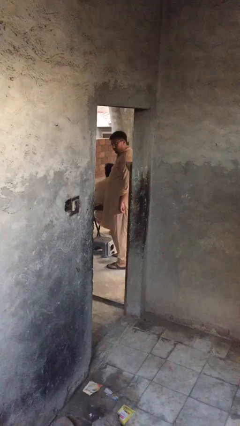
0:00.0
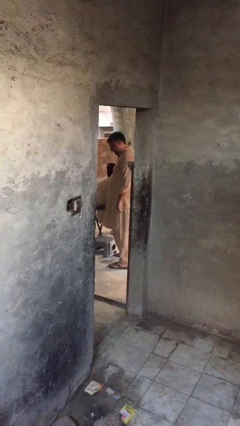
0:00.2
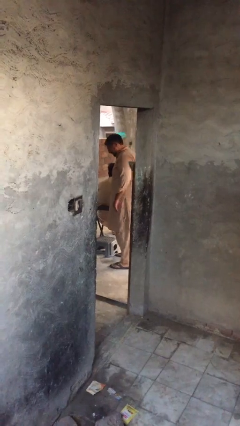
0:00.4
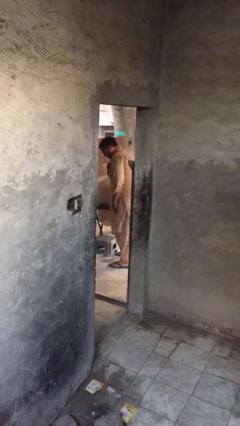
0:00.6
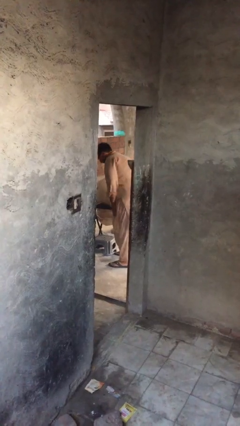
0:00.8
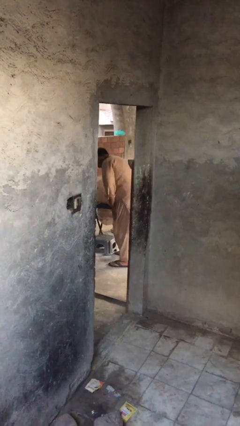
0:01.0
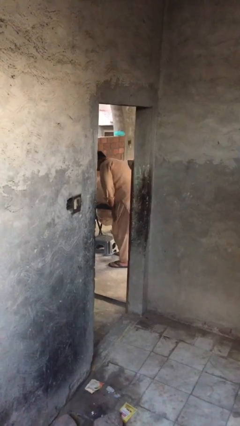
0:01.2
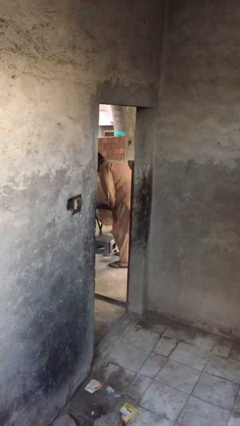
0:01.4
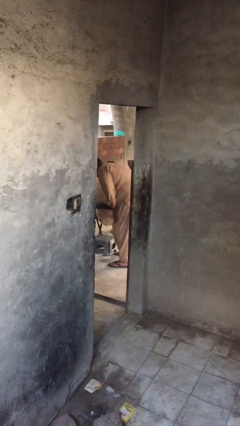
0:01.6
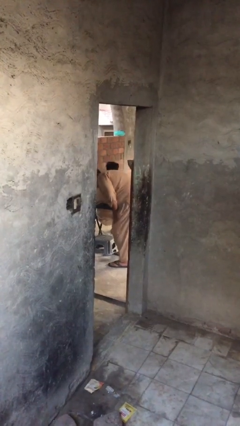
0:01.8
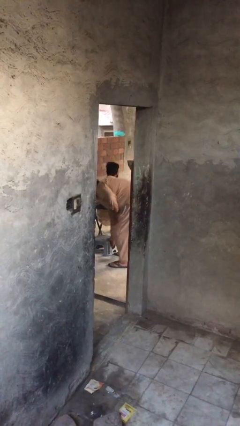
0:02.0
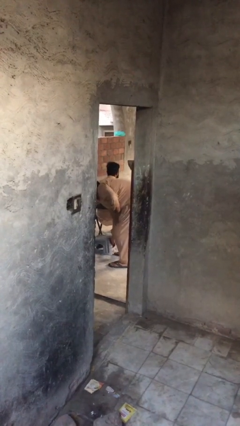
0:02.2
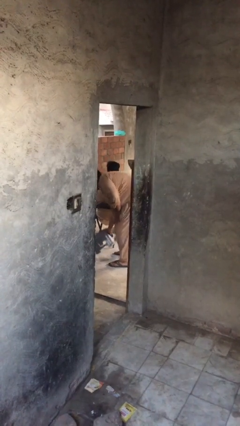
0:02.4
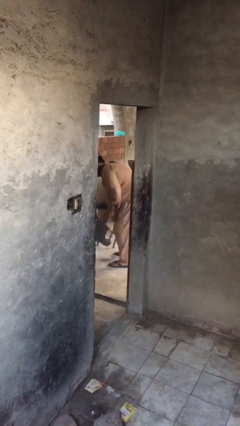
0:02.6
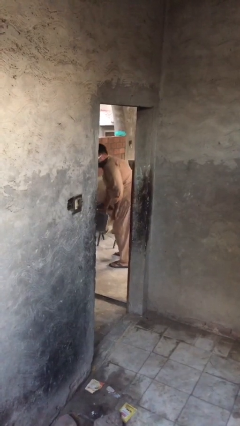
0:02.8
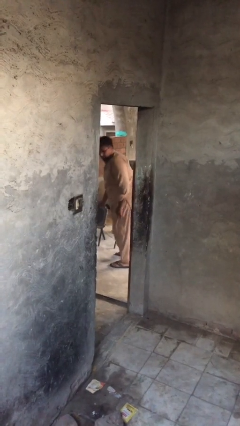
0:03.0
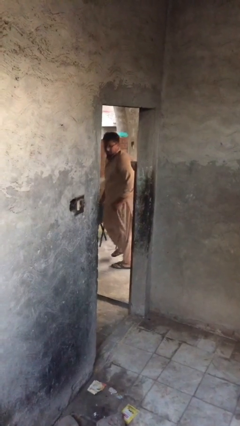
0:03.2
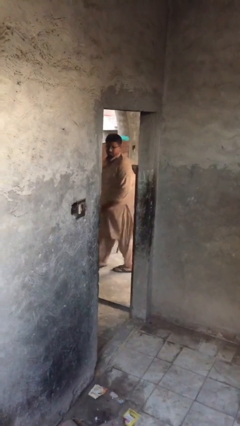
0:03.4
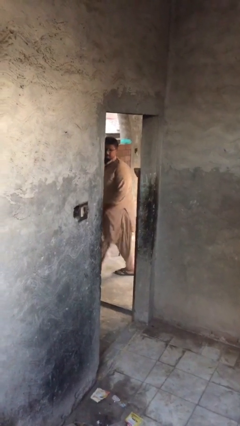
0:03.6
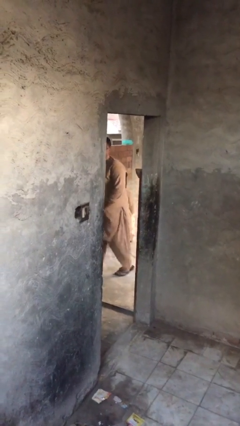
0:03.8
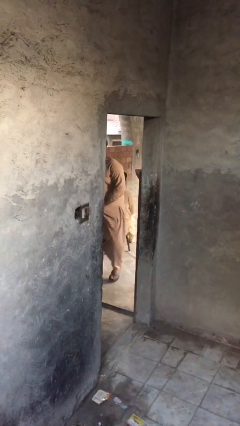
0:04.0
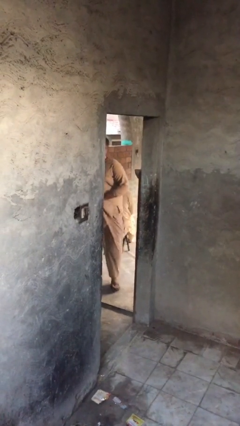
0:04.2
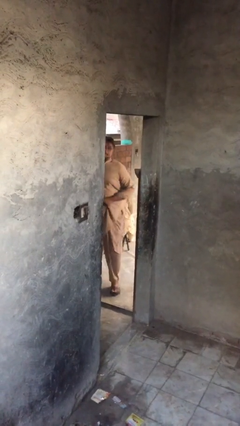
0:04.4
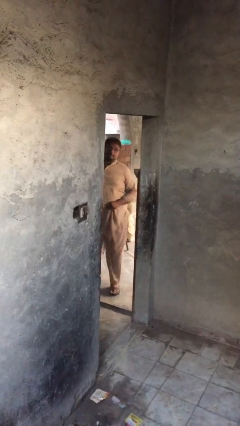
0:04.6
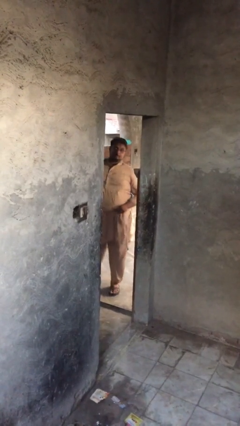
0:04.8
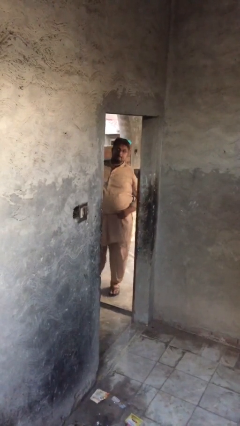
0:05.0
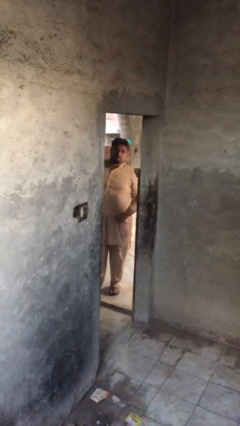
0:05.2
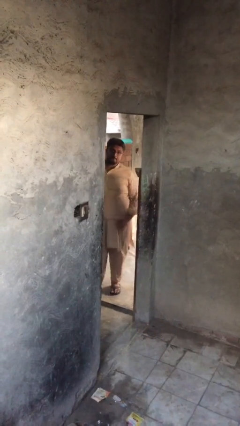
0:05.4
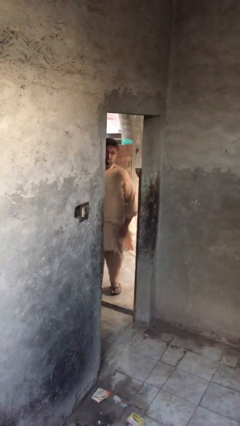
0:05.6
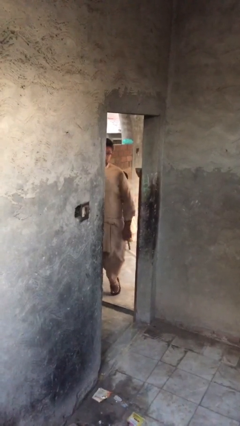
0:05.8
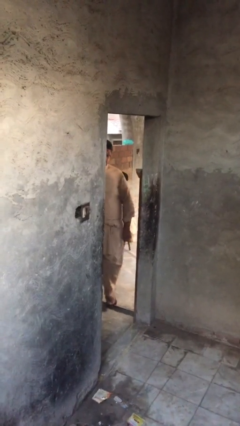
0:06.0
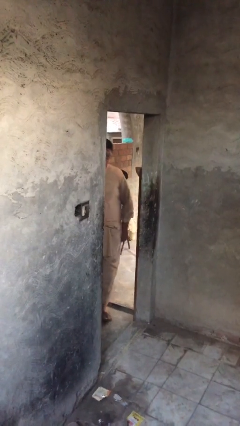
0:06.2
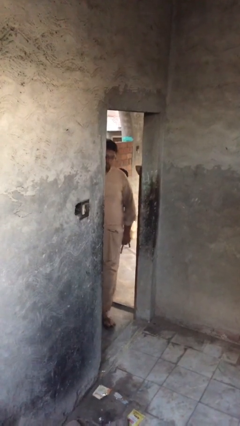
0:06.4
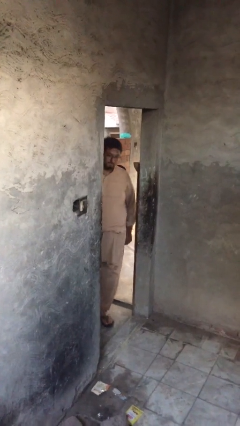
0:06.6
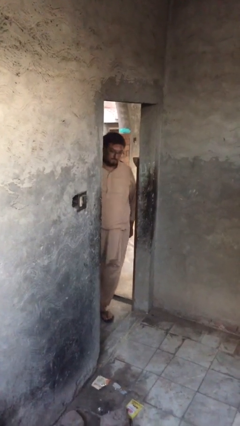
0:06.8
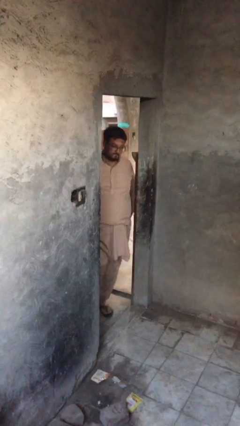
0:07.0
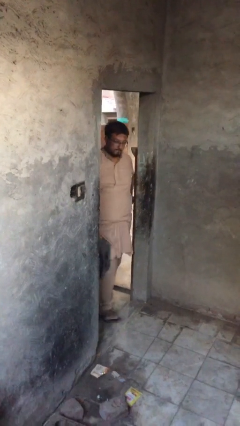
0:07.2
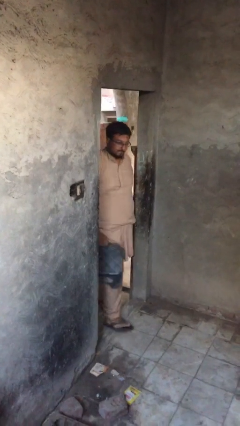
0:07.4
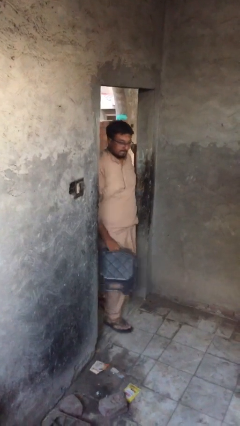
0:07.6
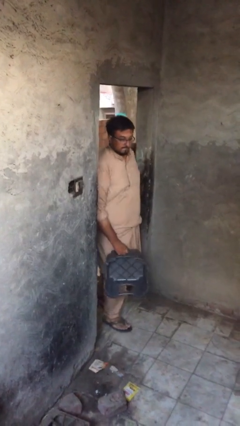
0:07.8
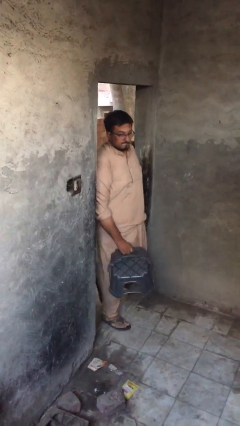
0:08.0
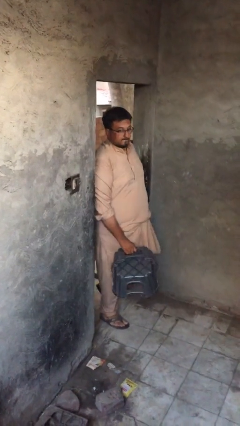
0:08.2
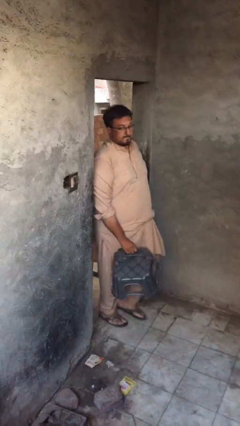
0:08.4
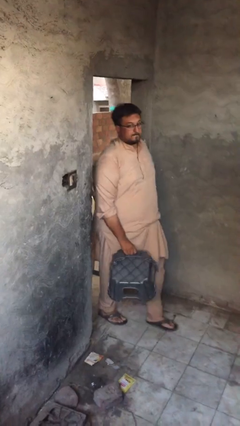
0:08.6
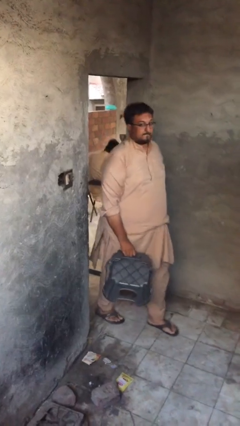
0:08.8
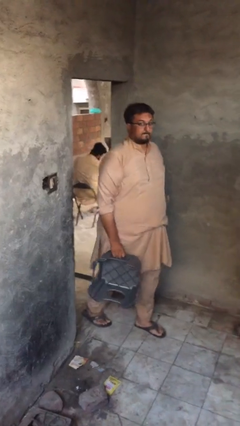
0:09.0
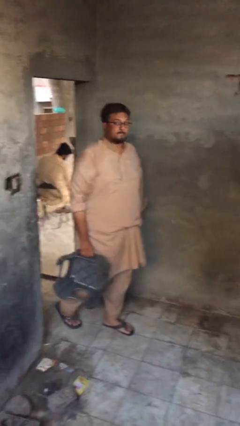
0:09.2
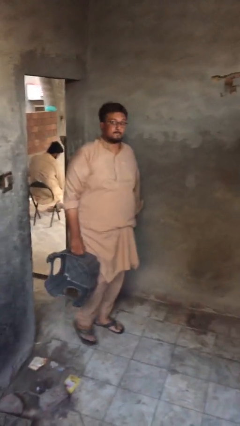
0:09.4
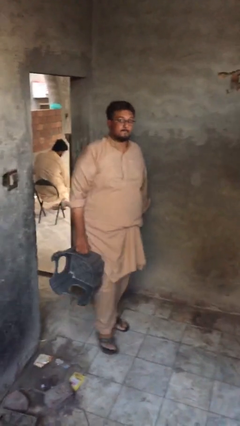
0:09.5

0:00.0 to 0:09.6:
person steals object from person

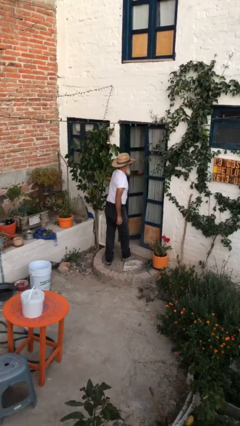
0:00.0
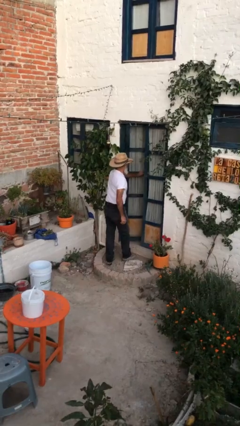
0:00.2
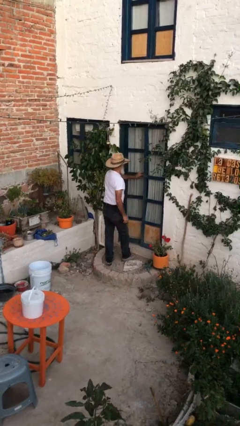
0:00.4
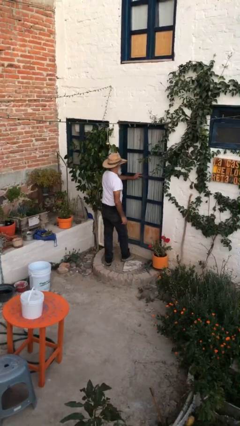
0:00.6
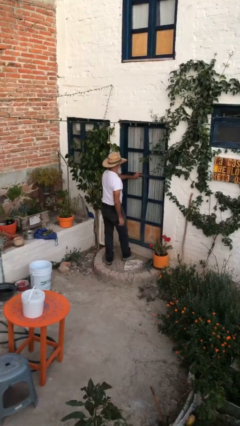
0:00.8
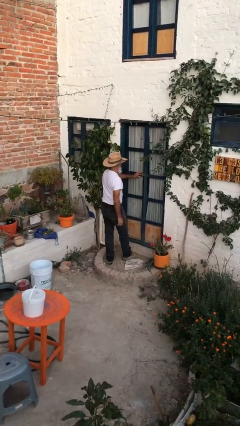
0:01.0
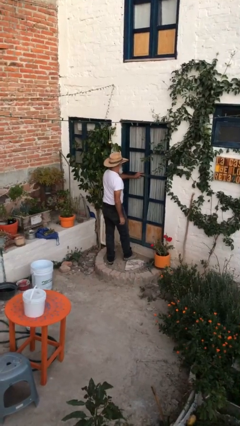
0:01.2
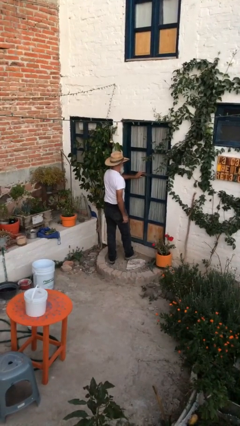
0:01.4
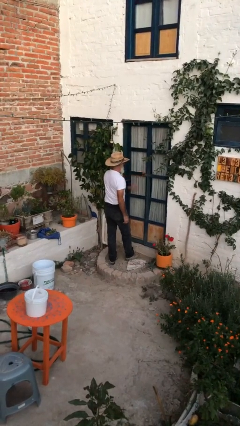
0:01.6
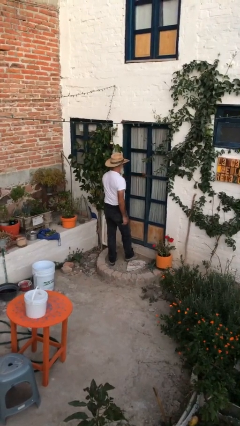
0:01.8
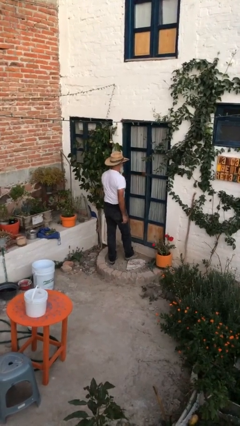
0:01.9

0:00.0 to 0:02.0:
person closes facility door

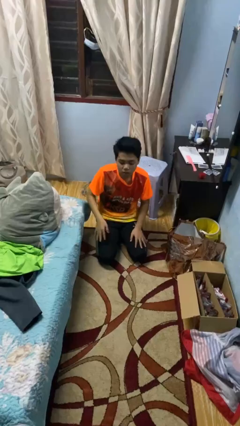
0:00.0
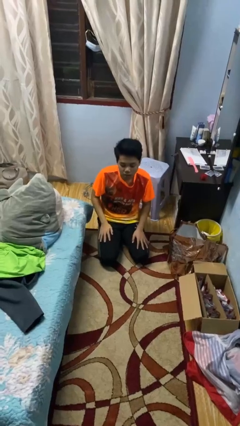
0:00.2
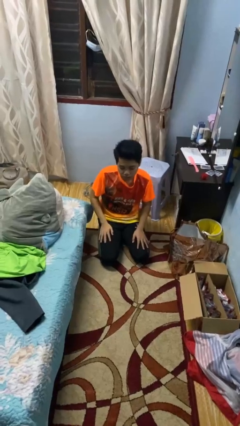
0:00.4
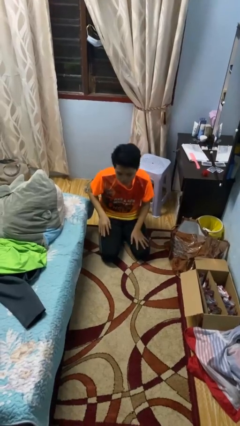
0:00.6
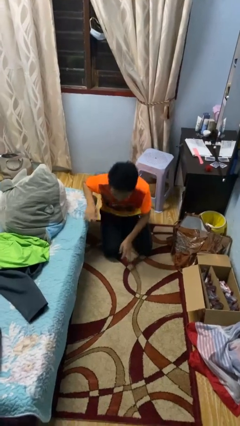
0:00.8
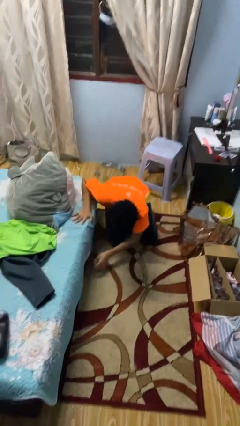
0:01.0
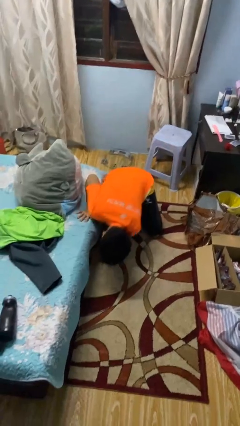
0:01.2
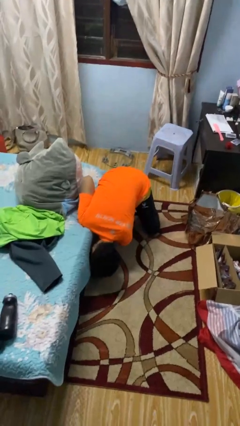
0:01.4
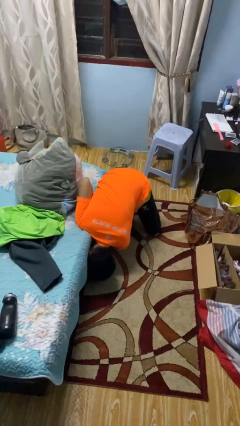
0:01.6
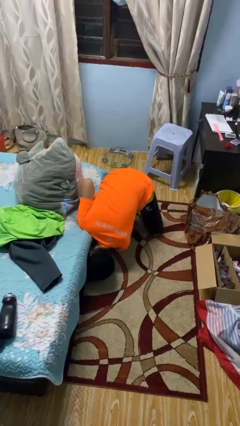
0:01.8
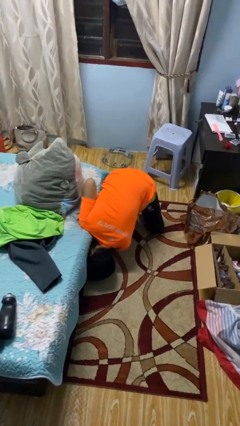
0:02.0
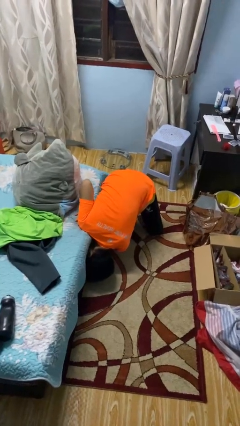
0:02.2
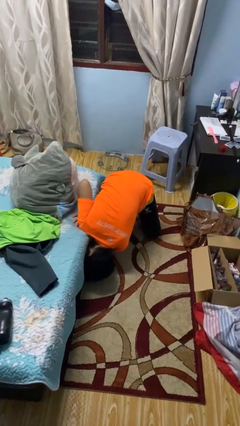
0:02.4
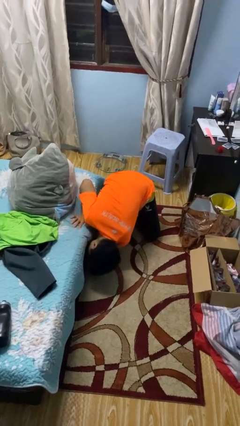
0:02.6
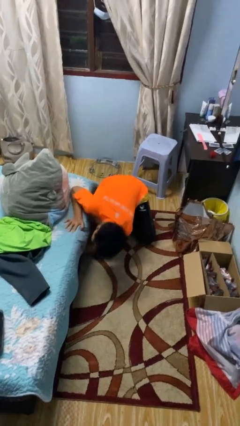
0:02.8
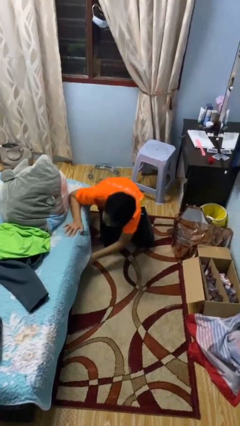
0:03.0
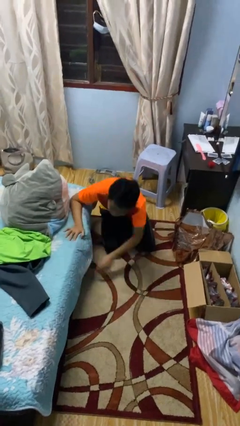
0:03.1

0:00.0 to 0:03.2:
person searches under bed

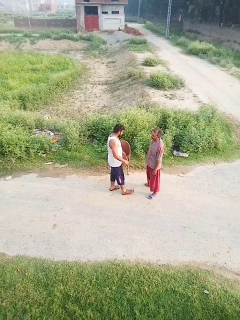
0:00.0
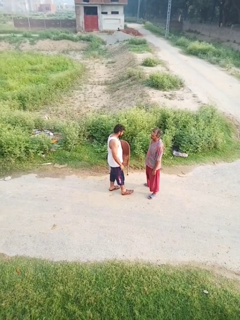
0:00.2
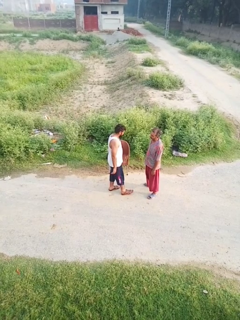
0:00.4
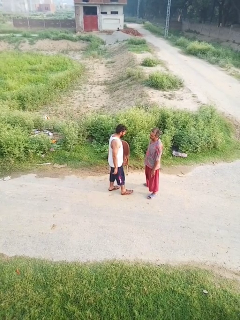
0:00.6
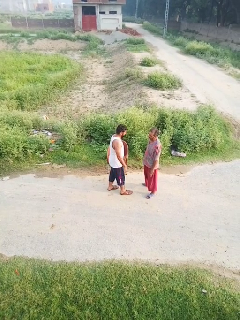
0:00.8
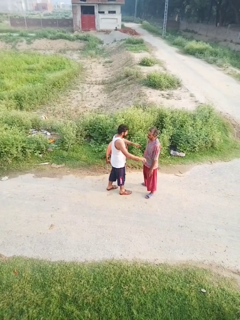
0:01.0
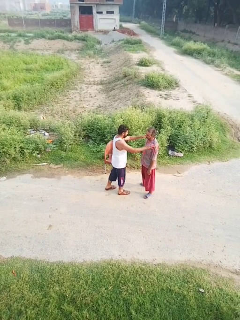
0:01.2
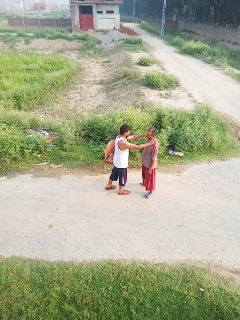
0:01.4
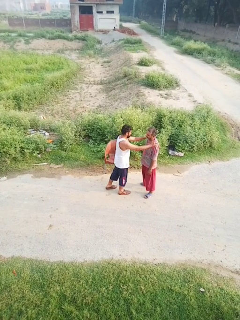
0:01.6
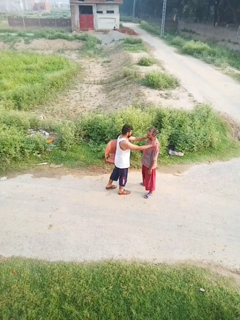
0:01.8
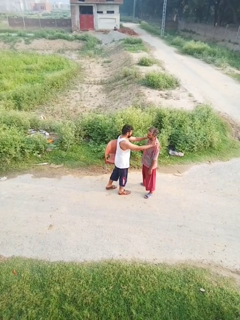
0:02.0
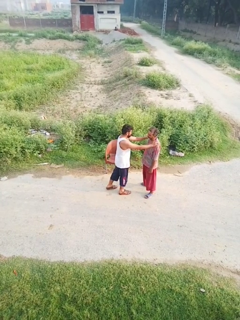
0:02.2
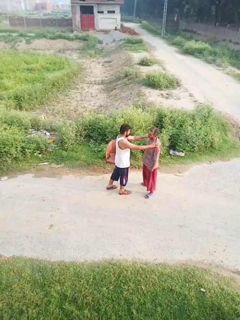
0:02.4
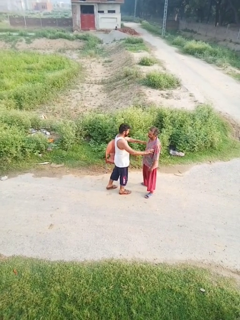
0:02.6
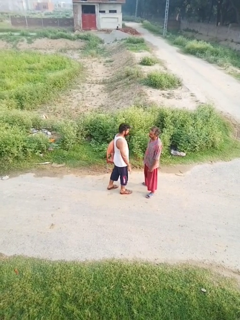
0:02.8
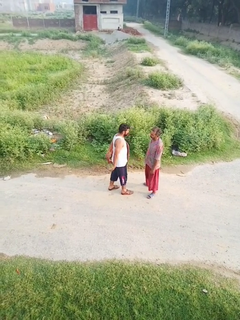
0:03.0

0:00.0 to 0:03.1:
person pounds shoulders of person

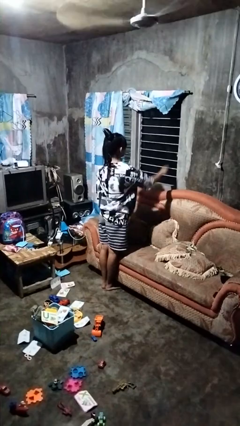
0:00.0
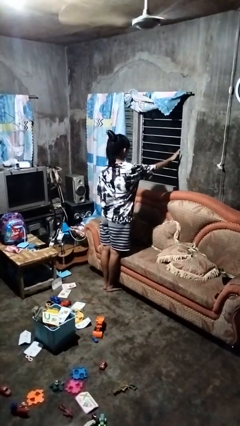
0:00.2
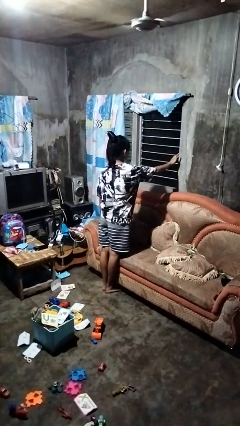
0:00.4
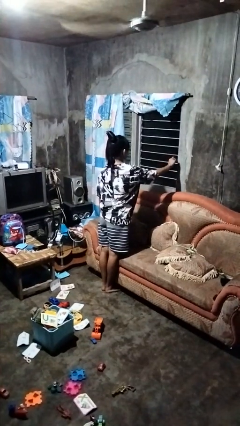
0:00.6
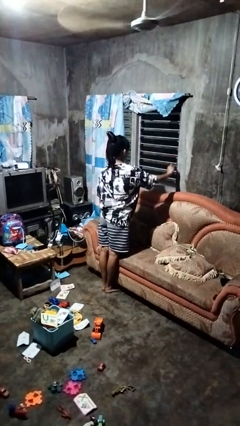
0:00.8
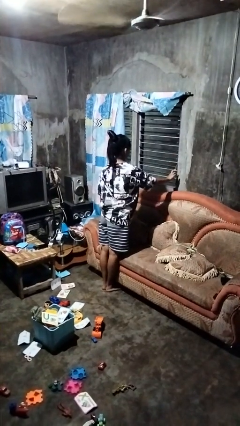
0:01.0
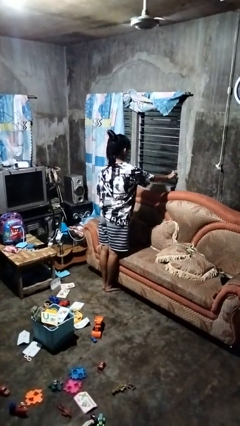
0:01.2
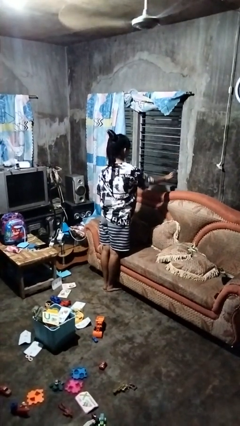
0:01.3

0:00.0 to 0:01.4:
person opens home window
